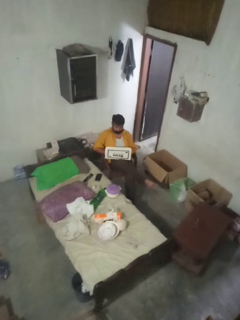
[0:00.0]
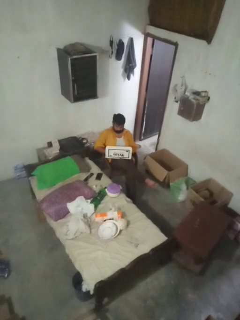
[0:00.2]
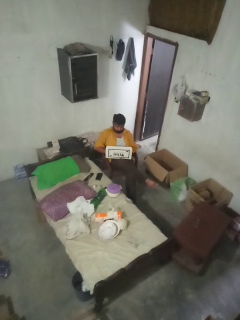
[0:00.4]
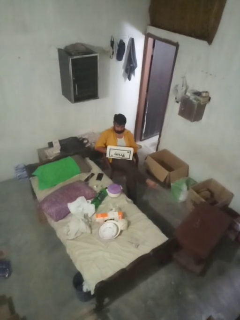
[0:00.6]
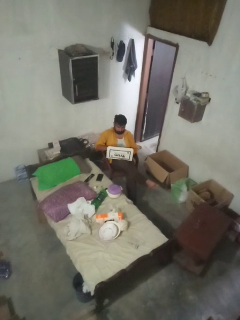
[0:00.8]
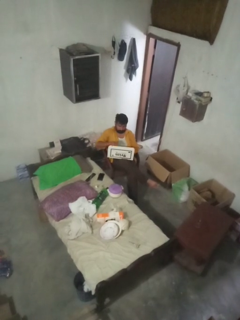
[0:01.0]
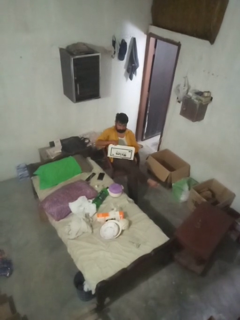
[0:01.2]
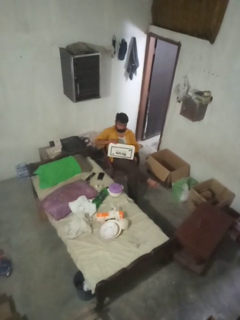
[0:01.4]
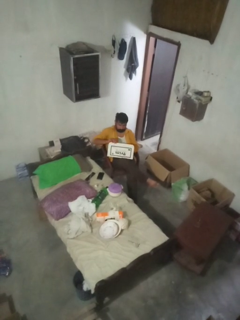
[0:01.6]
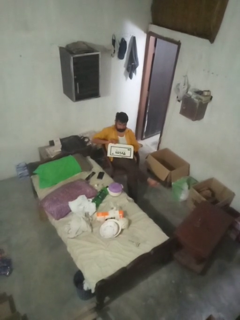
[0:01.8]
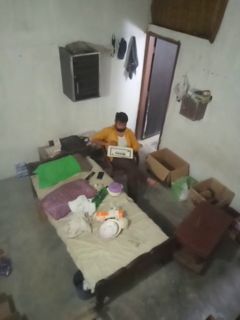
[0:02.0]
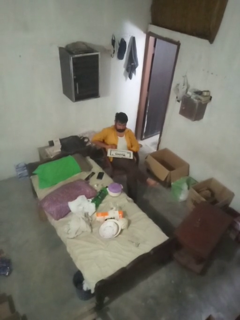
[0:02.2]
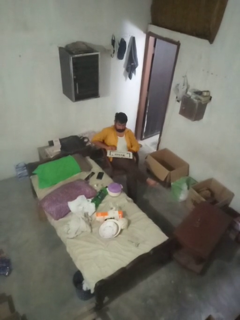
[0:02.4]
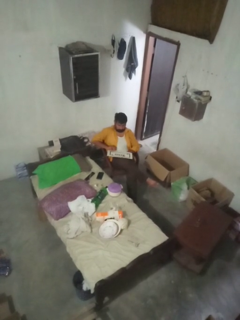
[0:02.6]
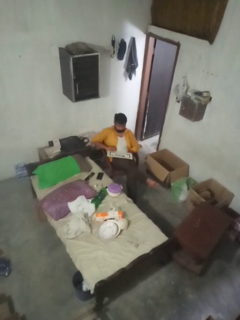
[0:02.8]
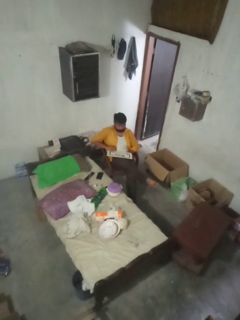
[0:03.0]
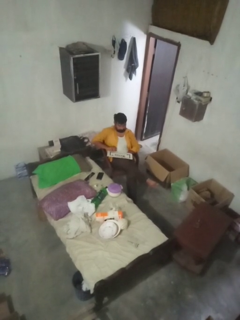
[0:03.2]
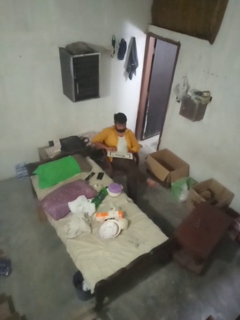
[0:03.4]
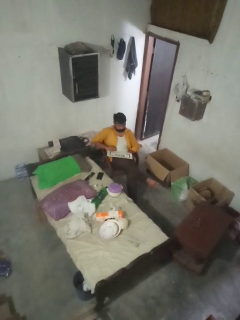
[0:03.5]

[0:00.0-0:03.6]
person closes laptop

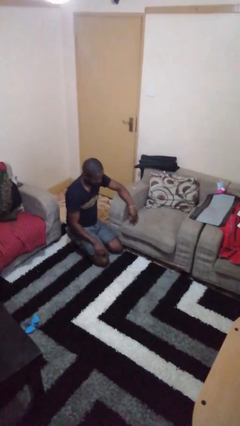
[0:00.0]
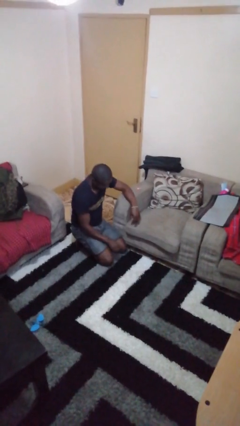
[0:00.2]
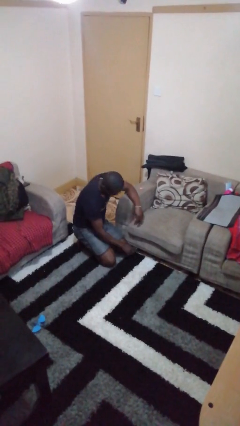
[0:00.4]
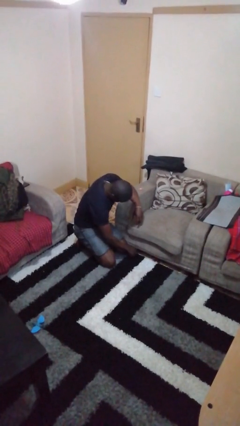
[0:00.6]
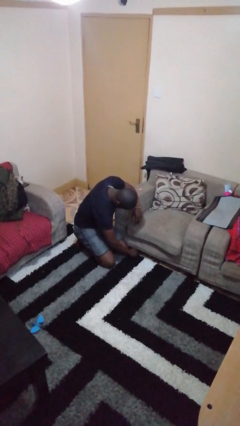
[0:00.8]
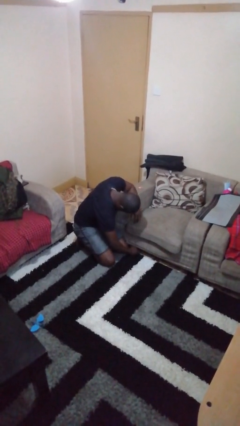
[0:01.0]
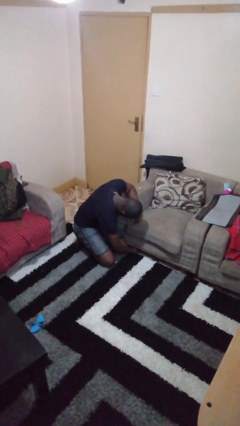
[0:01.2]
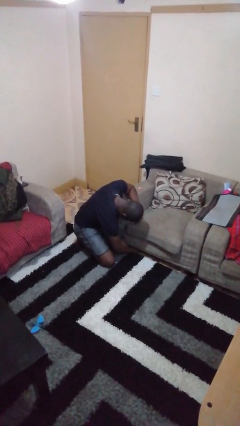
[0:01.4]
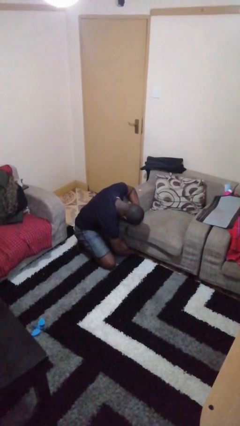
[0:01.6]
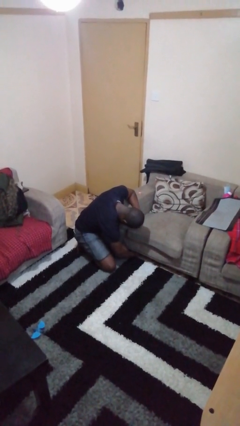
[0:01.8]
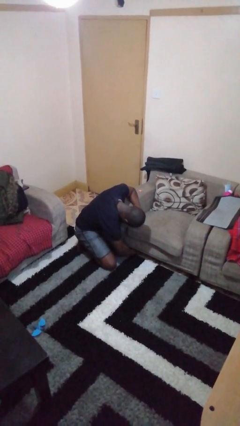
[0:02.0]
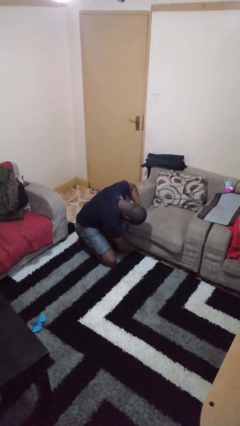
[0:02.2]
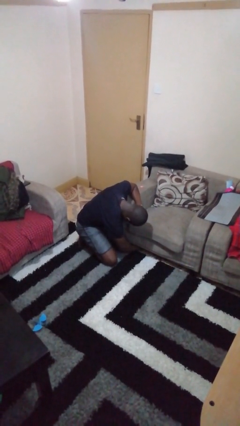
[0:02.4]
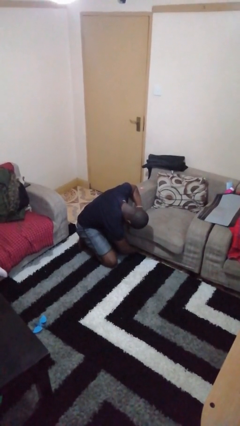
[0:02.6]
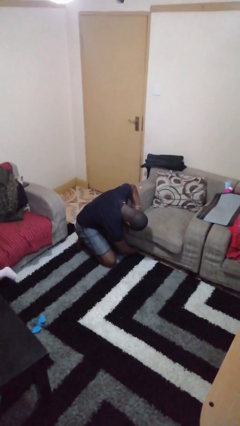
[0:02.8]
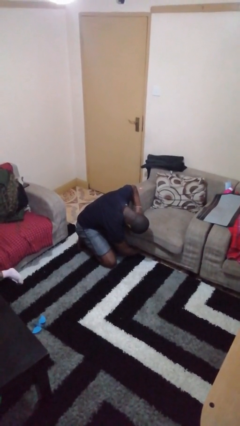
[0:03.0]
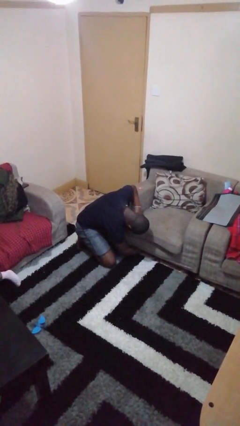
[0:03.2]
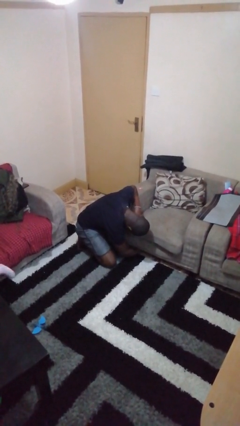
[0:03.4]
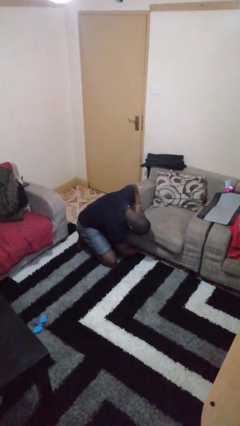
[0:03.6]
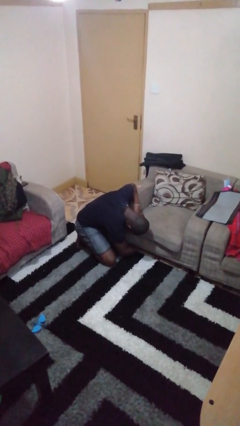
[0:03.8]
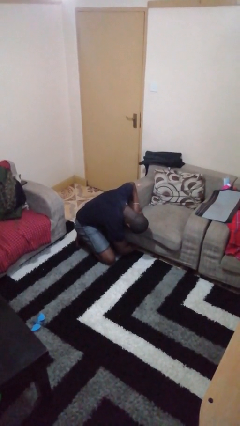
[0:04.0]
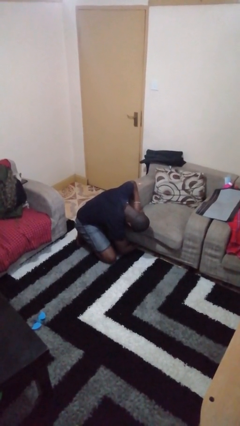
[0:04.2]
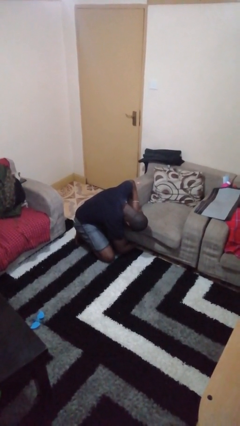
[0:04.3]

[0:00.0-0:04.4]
person searches under couch

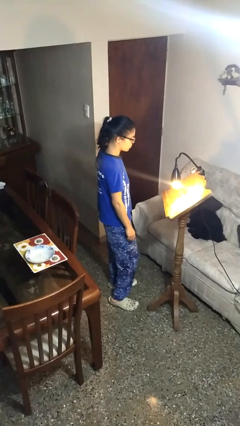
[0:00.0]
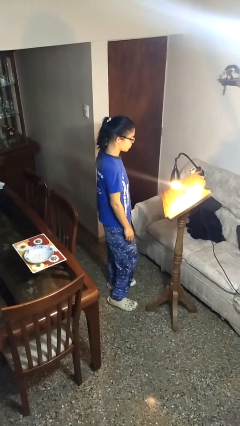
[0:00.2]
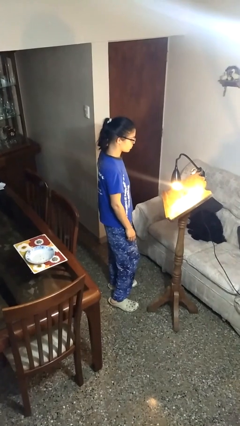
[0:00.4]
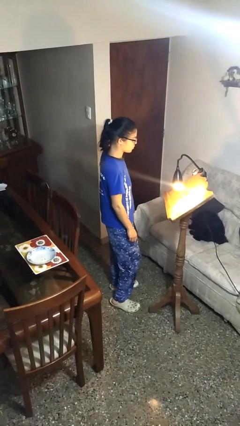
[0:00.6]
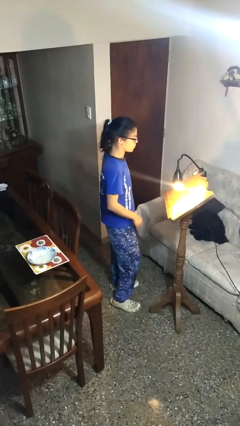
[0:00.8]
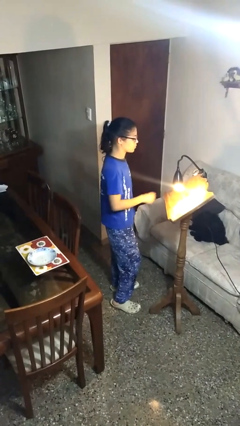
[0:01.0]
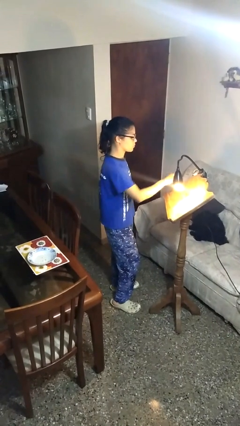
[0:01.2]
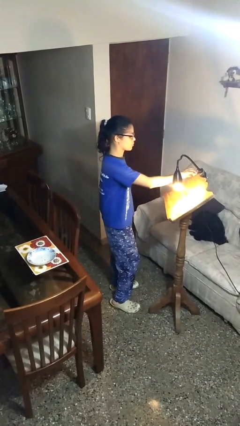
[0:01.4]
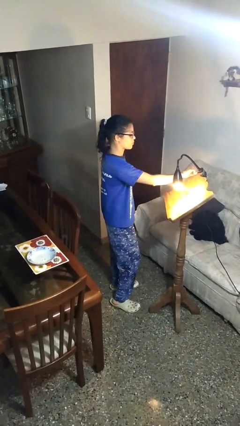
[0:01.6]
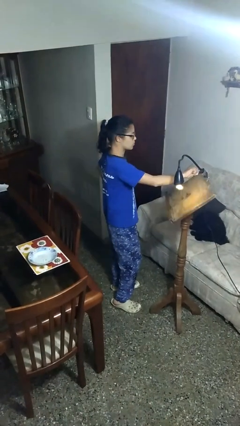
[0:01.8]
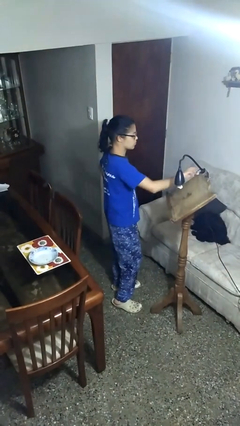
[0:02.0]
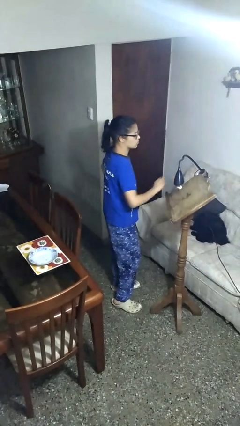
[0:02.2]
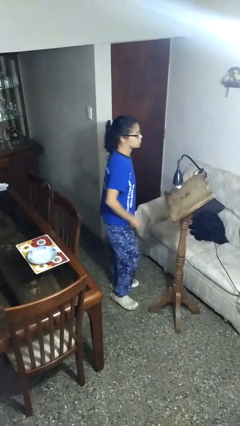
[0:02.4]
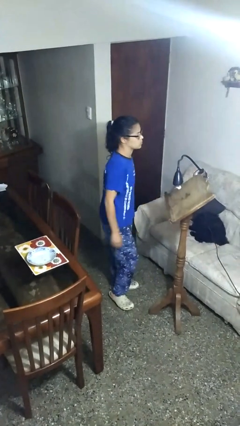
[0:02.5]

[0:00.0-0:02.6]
person turns off lamp

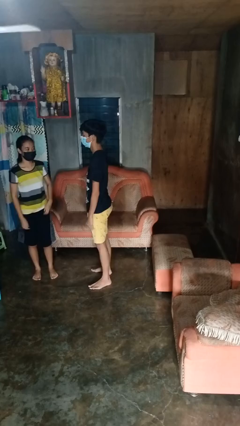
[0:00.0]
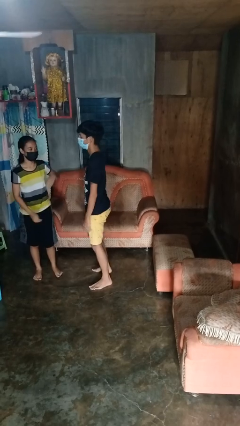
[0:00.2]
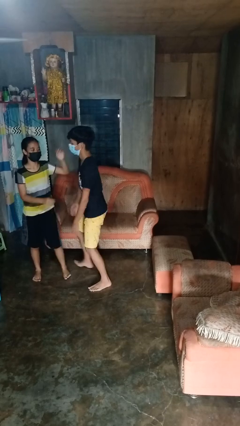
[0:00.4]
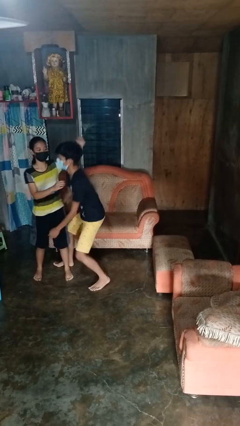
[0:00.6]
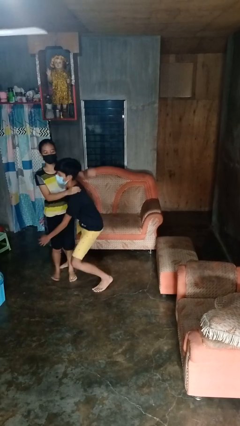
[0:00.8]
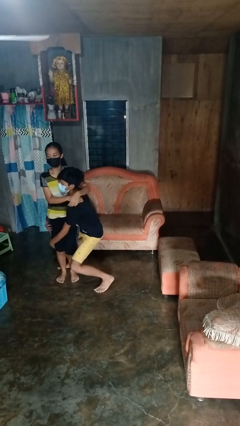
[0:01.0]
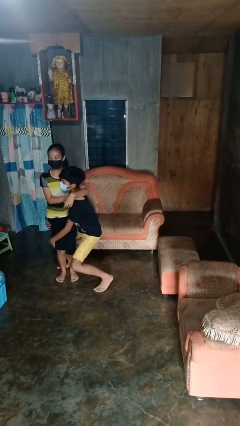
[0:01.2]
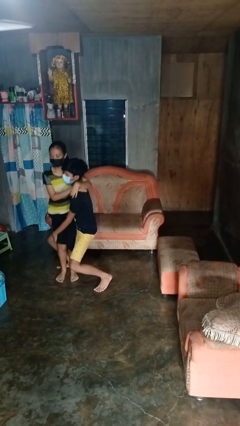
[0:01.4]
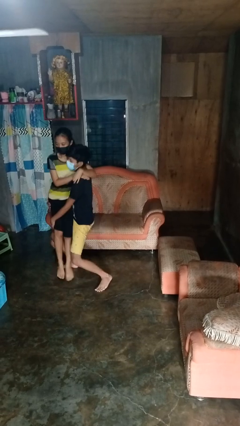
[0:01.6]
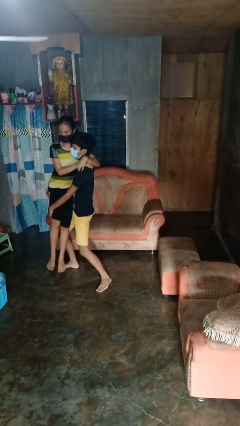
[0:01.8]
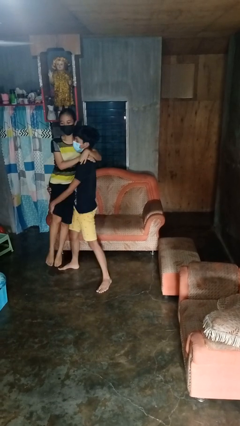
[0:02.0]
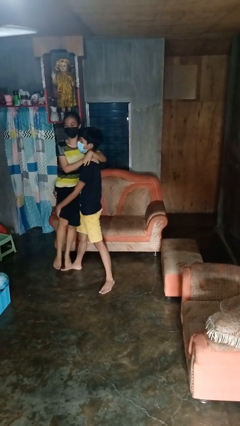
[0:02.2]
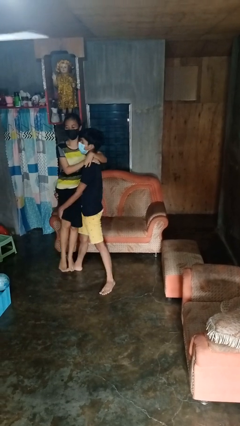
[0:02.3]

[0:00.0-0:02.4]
person picks up person

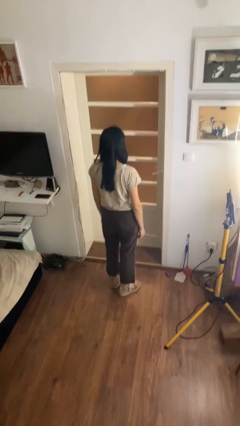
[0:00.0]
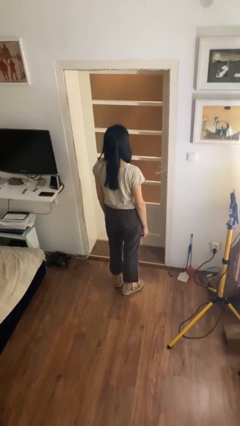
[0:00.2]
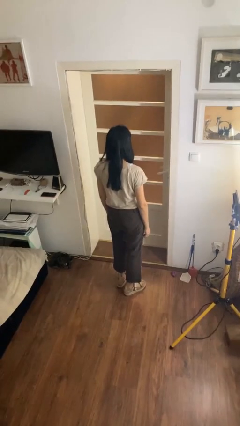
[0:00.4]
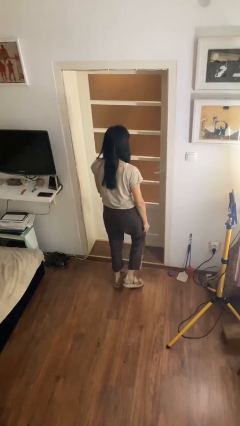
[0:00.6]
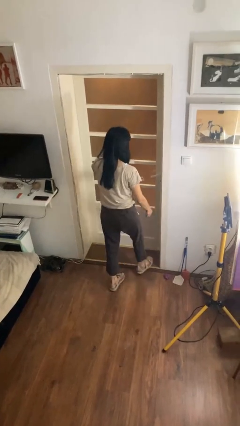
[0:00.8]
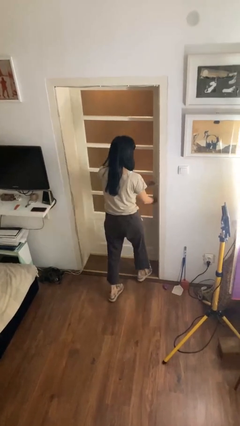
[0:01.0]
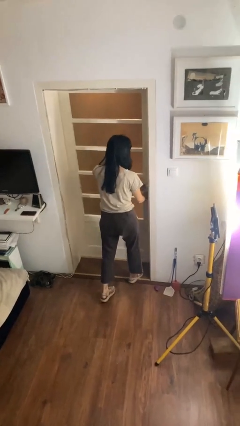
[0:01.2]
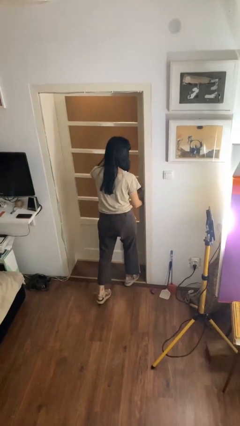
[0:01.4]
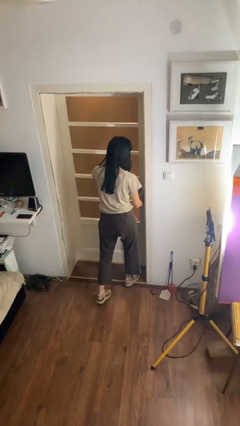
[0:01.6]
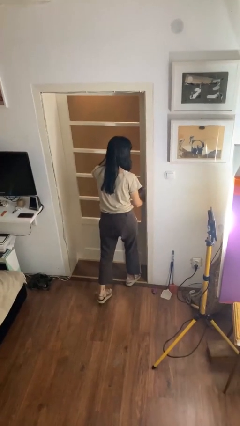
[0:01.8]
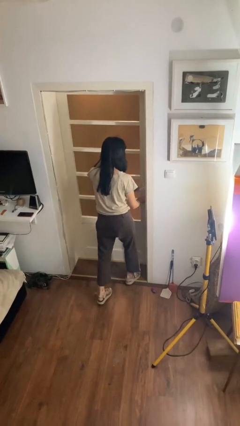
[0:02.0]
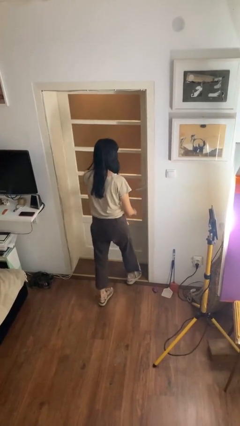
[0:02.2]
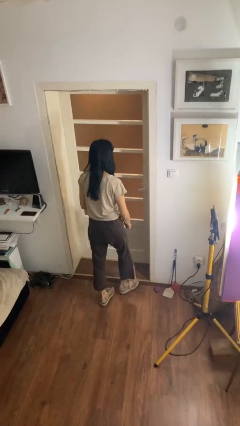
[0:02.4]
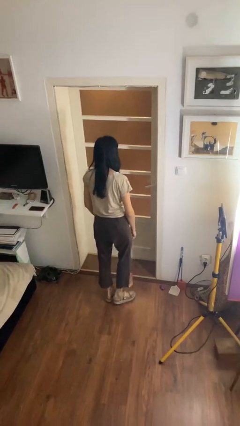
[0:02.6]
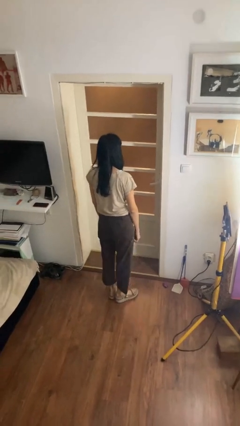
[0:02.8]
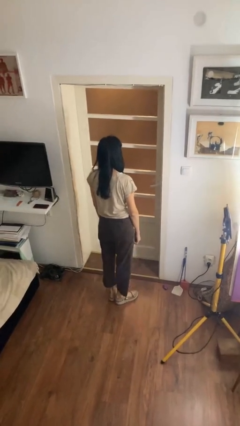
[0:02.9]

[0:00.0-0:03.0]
person unlocks door with keys

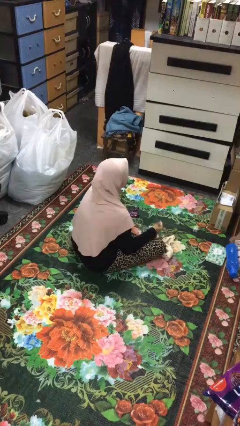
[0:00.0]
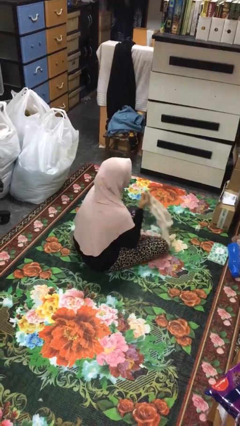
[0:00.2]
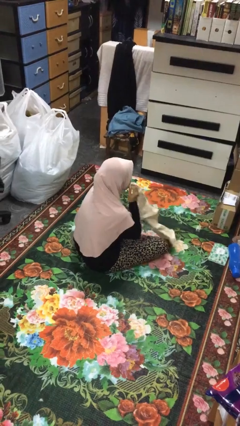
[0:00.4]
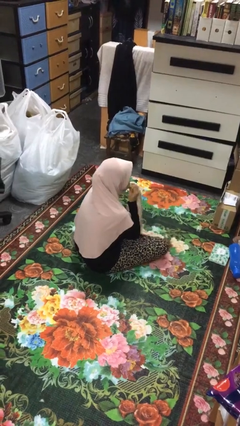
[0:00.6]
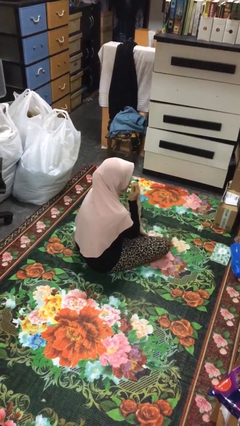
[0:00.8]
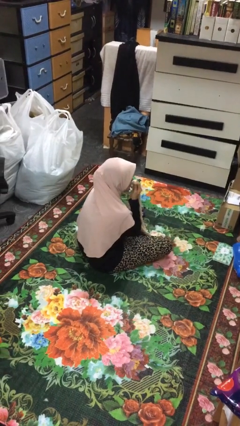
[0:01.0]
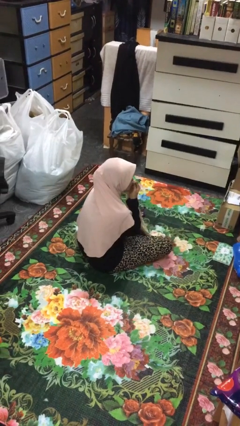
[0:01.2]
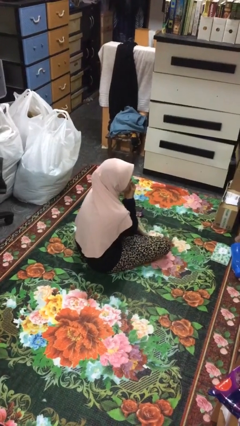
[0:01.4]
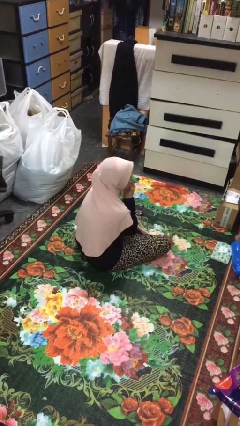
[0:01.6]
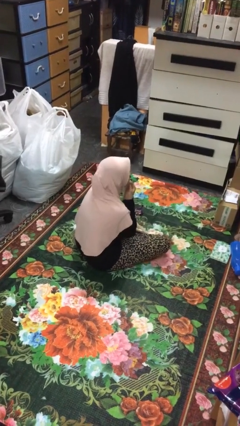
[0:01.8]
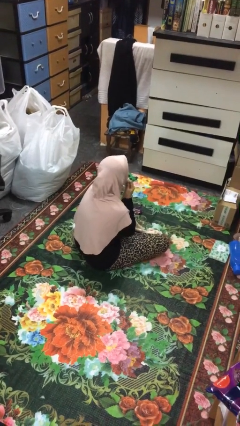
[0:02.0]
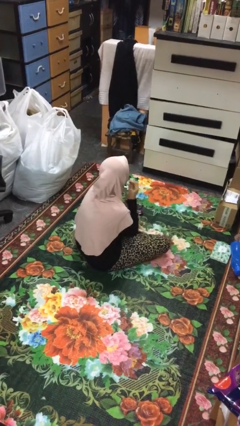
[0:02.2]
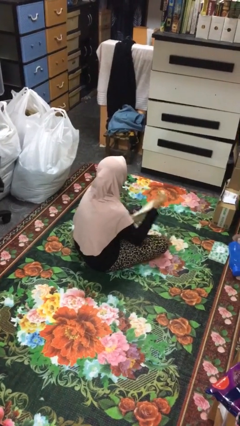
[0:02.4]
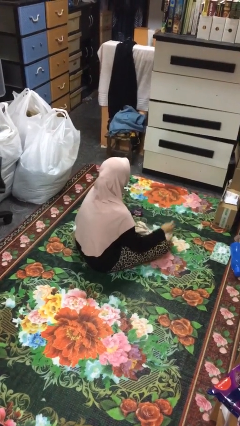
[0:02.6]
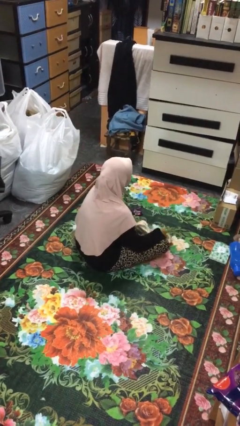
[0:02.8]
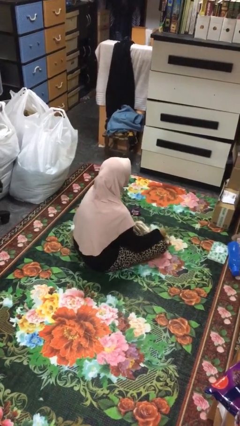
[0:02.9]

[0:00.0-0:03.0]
person wipes mouth with napkin
